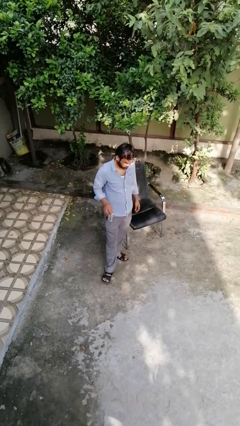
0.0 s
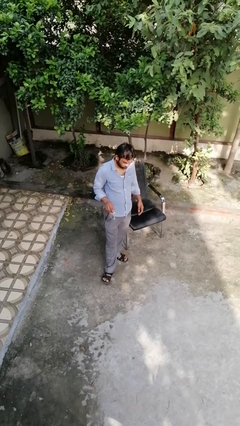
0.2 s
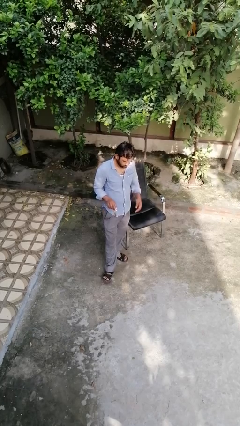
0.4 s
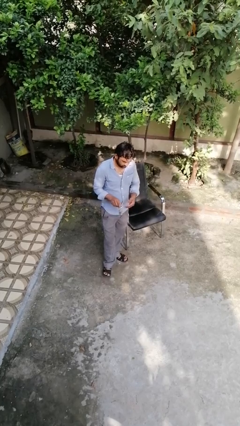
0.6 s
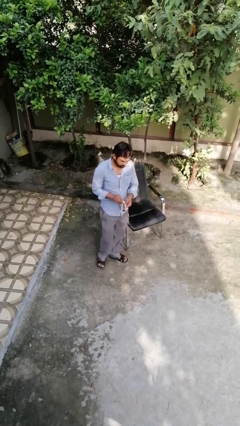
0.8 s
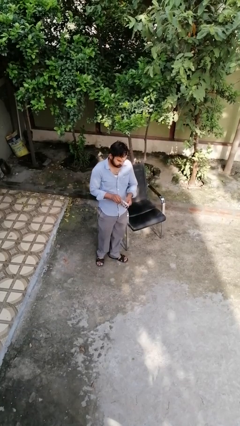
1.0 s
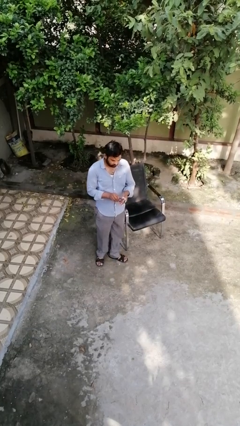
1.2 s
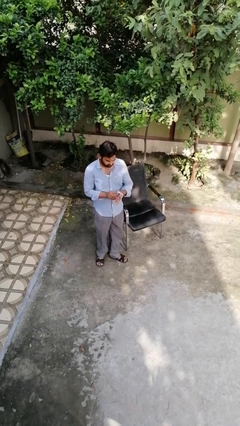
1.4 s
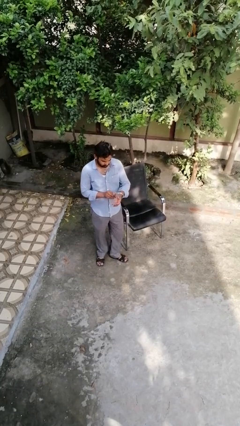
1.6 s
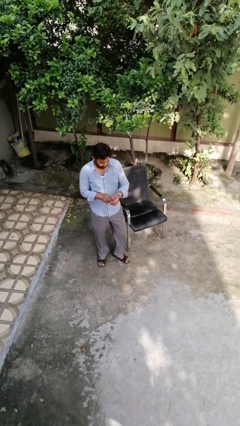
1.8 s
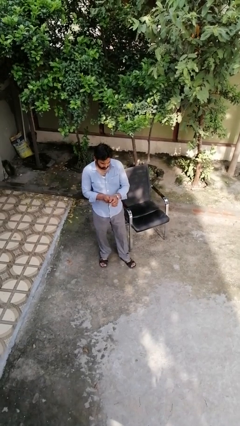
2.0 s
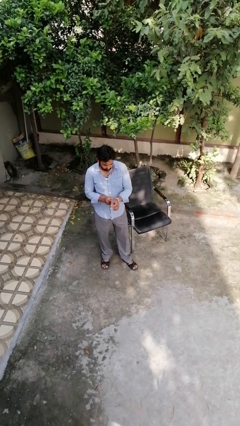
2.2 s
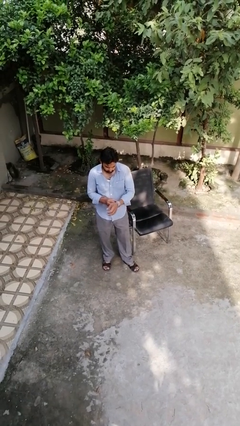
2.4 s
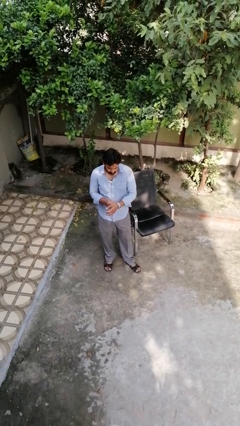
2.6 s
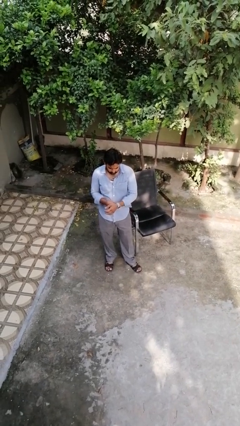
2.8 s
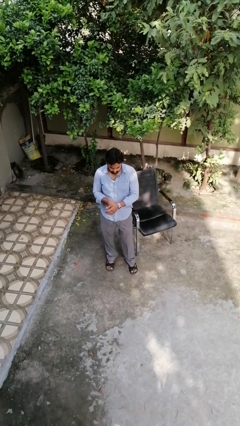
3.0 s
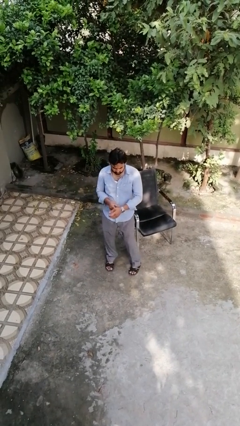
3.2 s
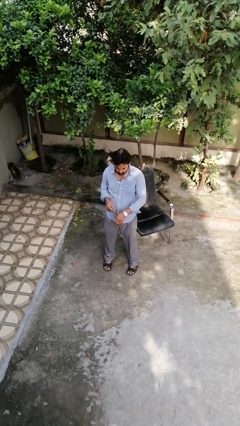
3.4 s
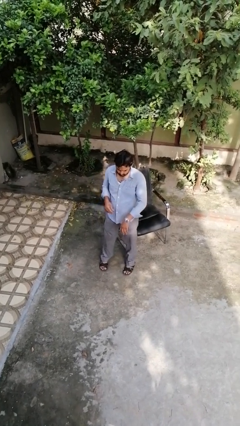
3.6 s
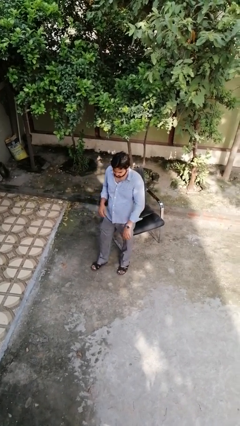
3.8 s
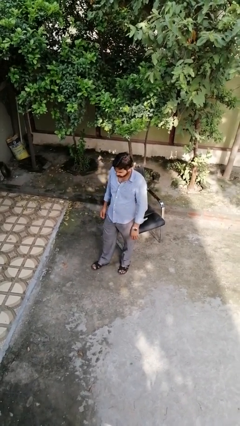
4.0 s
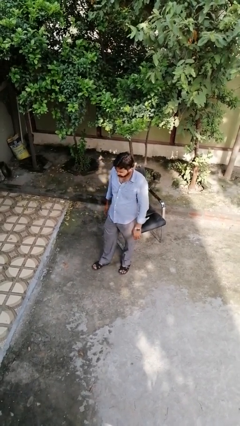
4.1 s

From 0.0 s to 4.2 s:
person puts on wristwatch

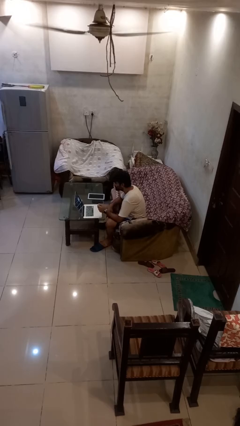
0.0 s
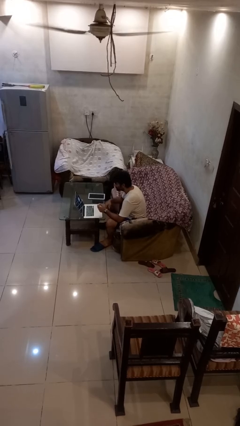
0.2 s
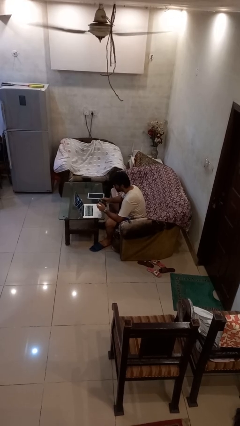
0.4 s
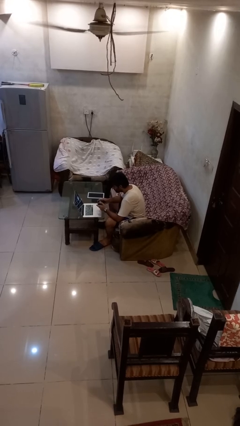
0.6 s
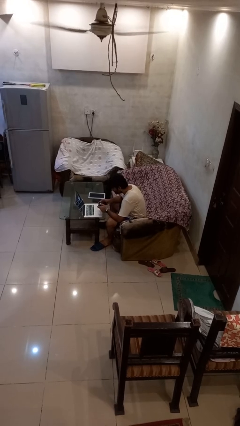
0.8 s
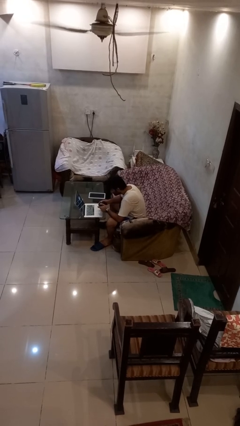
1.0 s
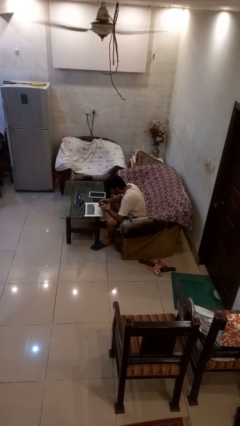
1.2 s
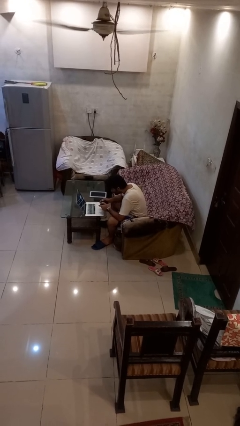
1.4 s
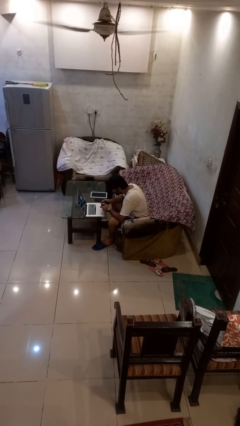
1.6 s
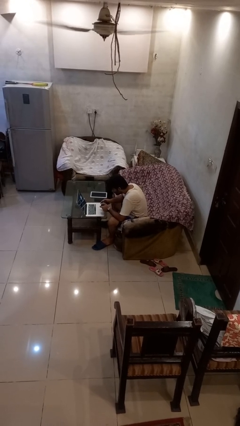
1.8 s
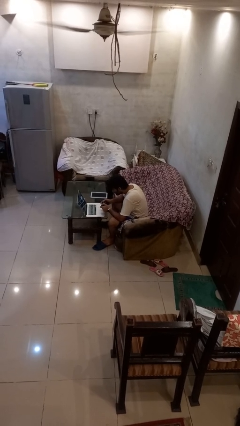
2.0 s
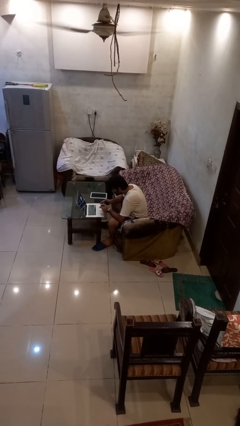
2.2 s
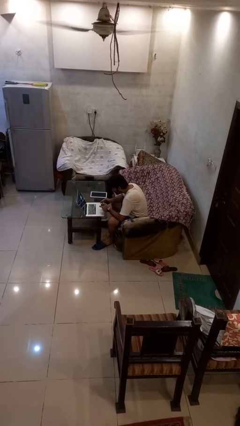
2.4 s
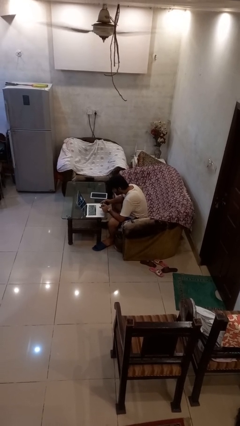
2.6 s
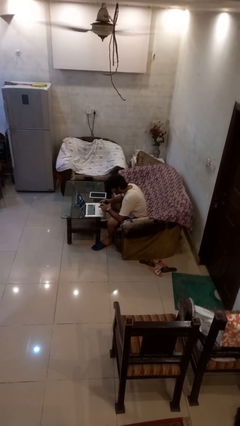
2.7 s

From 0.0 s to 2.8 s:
person interacts with handheld game

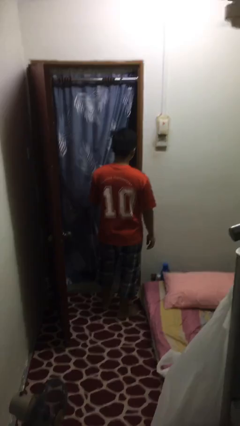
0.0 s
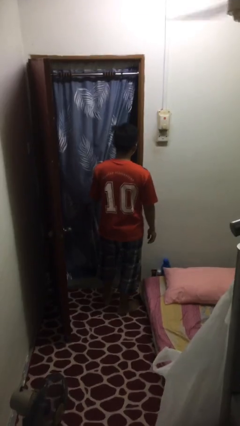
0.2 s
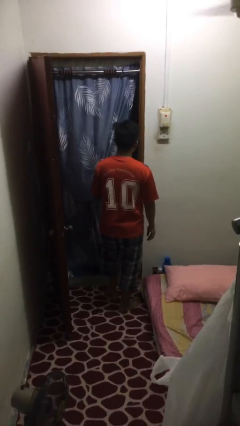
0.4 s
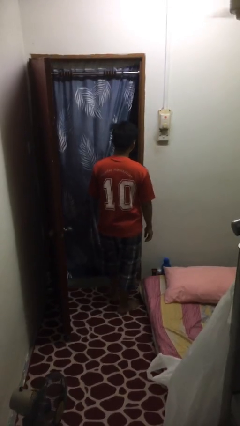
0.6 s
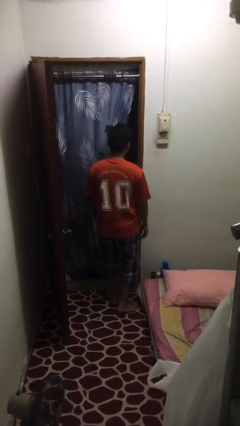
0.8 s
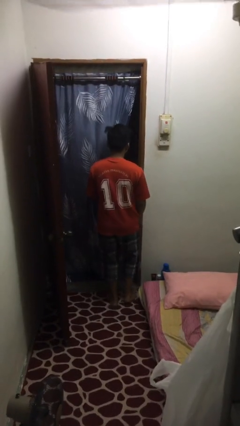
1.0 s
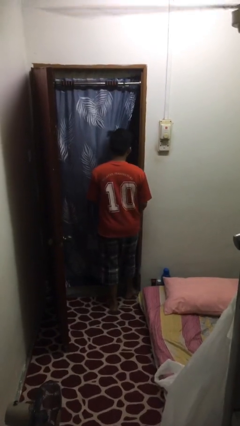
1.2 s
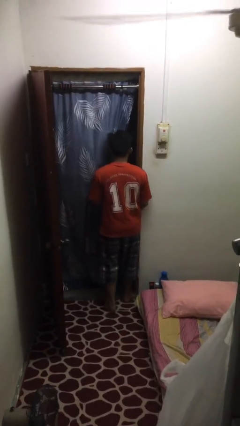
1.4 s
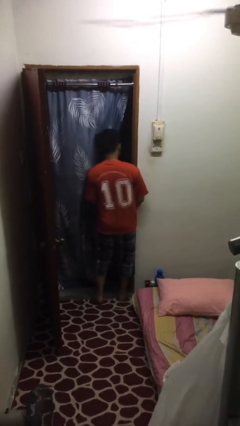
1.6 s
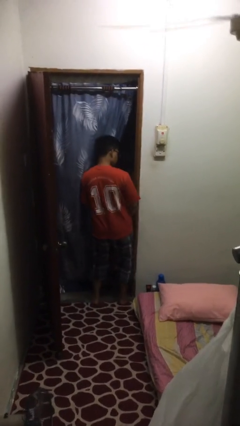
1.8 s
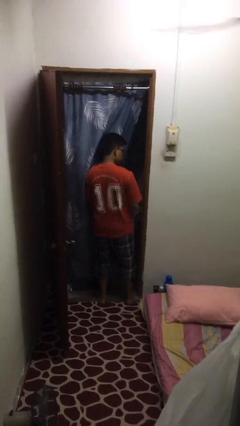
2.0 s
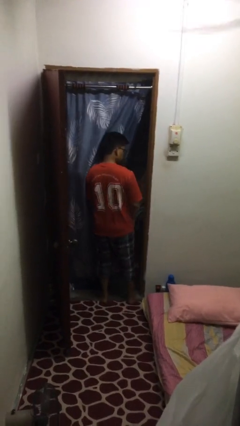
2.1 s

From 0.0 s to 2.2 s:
person bumps into wall

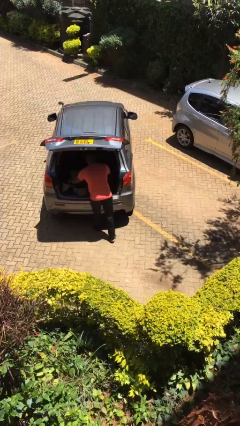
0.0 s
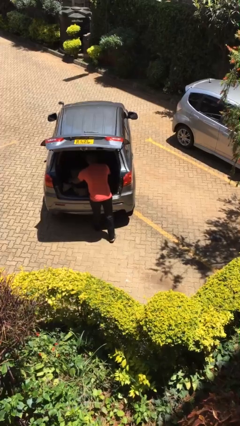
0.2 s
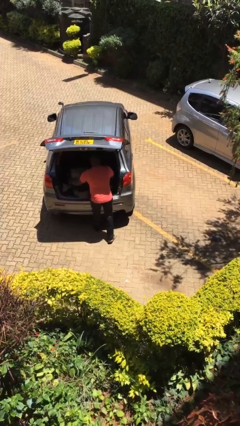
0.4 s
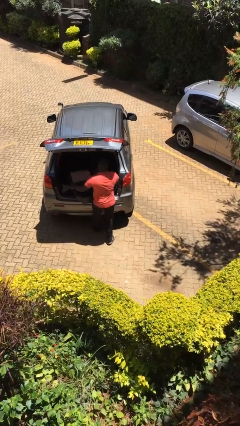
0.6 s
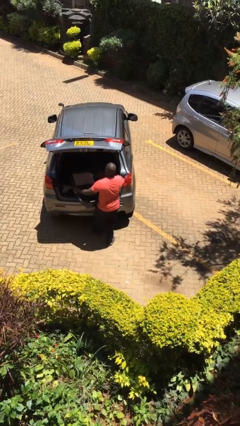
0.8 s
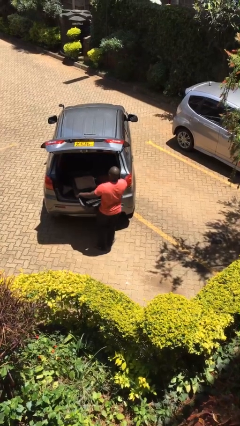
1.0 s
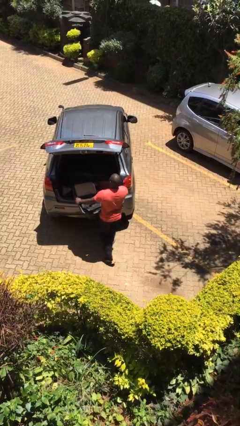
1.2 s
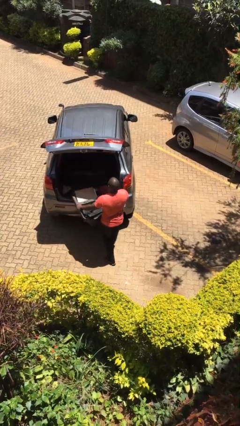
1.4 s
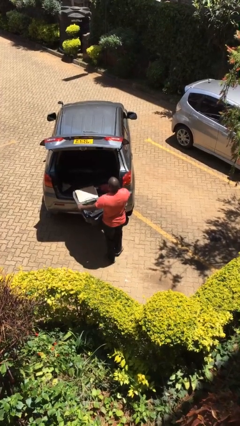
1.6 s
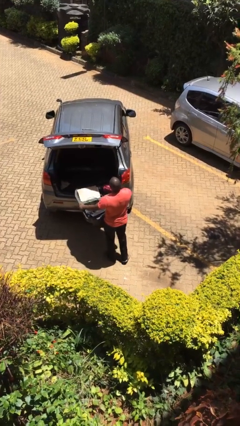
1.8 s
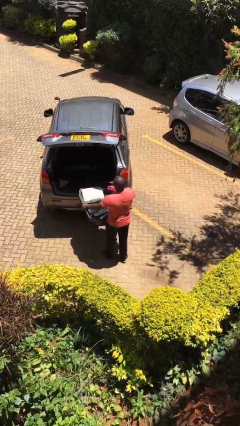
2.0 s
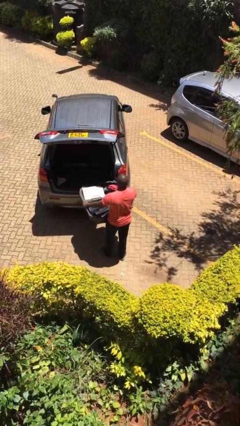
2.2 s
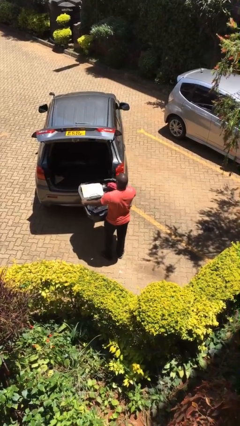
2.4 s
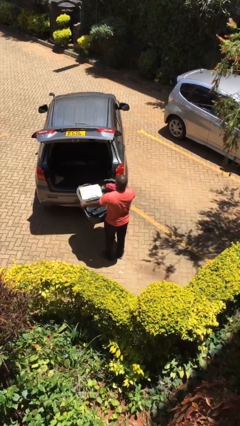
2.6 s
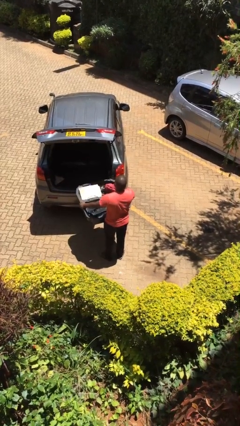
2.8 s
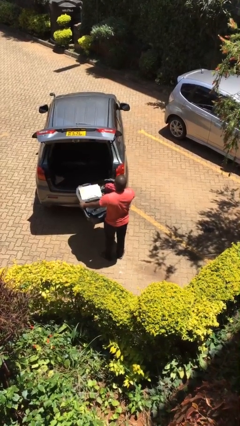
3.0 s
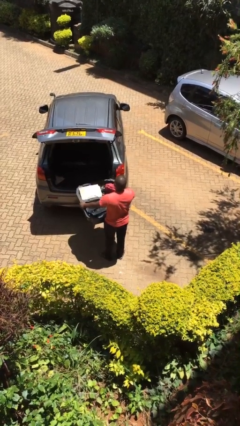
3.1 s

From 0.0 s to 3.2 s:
person unloads car

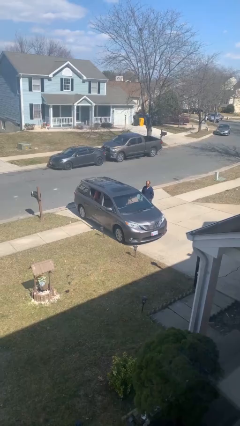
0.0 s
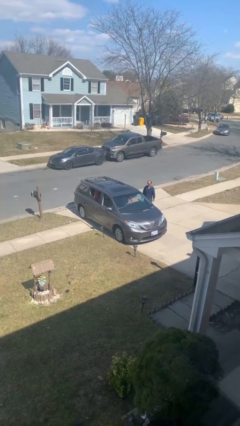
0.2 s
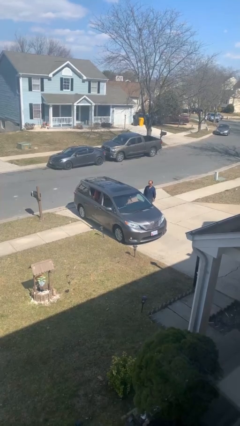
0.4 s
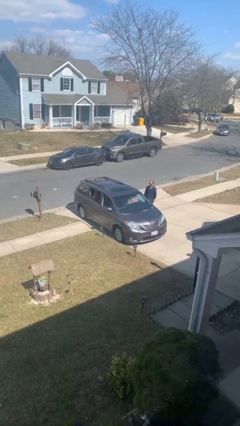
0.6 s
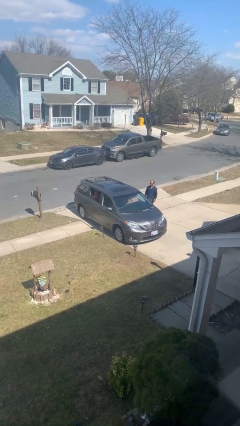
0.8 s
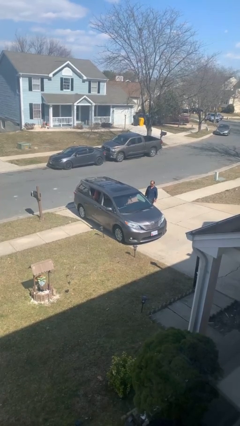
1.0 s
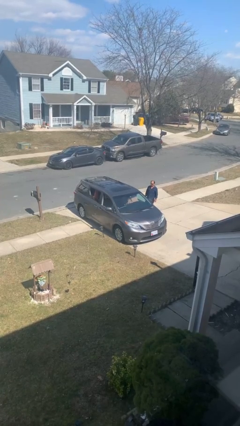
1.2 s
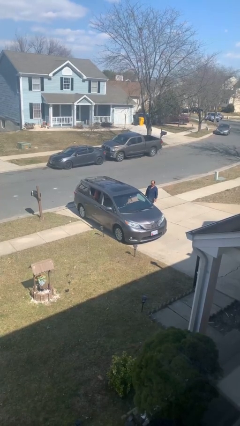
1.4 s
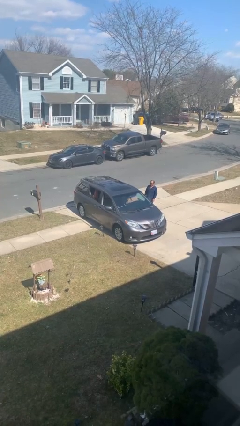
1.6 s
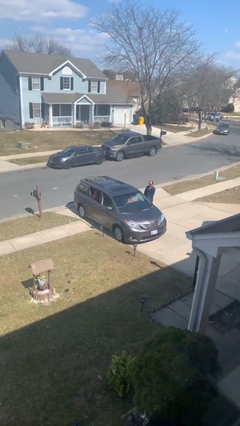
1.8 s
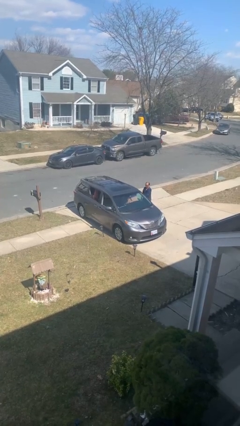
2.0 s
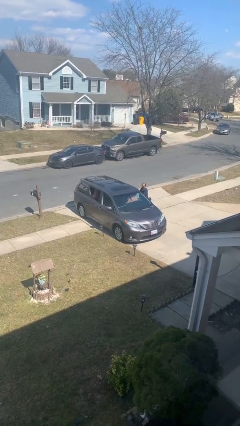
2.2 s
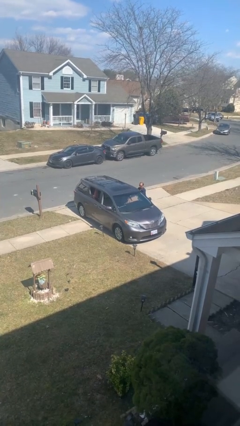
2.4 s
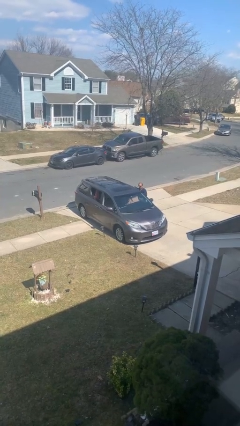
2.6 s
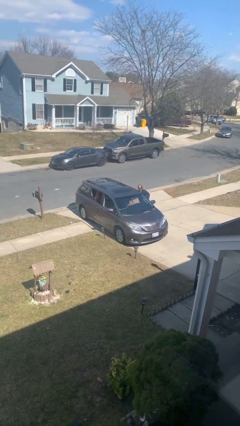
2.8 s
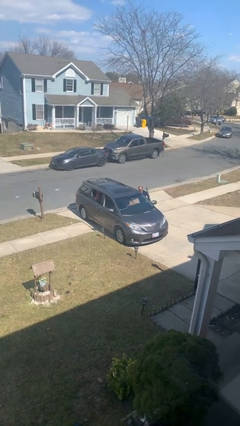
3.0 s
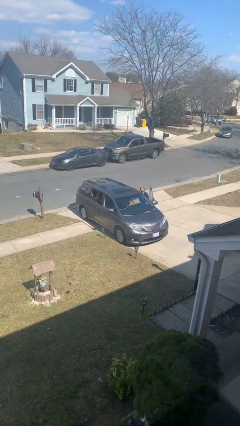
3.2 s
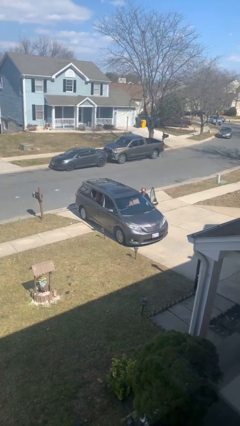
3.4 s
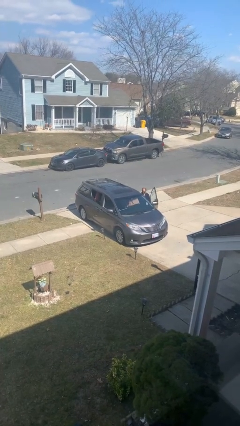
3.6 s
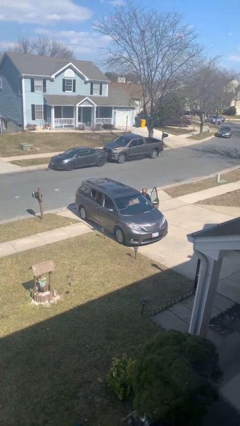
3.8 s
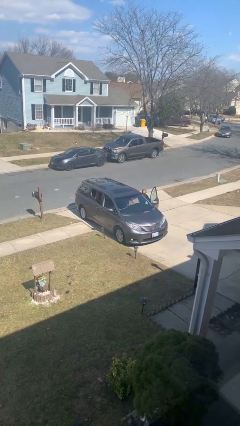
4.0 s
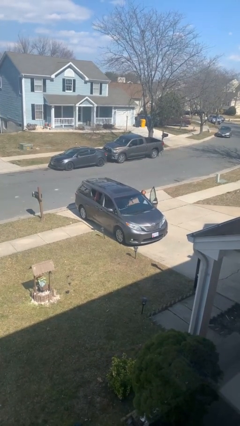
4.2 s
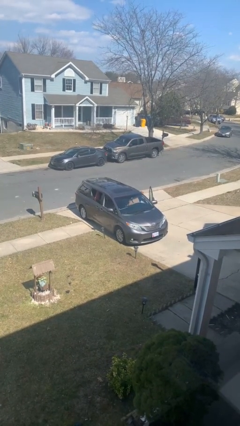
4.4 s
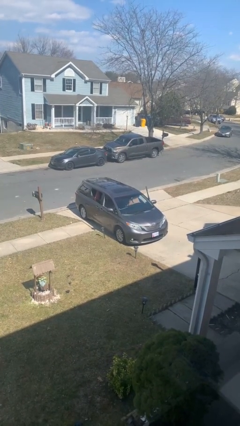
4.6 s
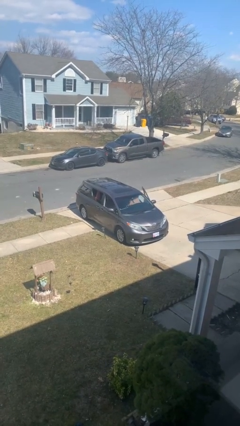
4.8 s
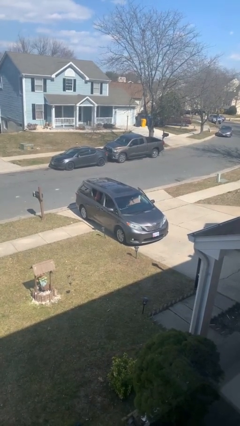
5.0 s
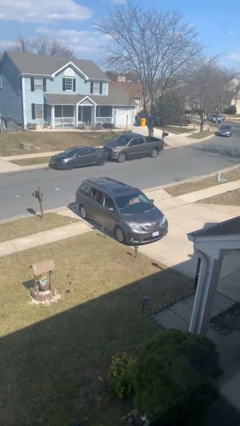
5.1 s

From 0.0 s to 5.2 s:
car picks up person

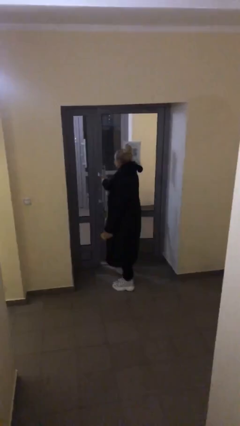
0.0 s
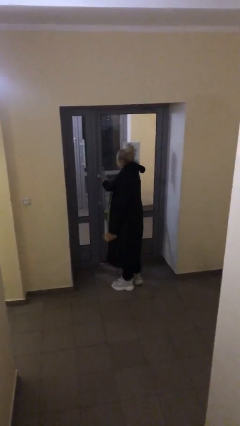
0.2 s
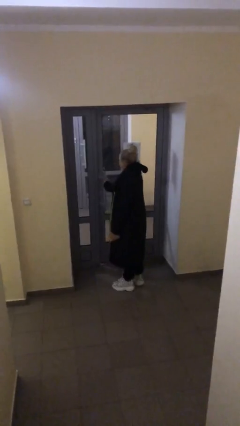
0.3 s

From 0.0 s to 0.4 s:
person closes facility door
